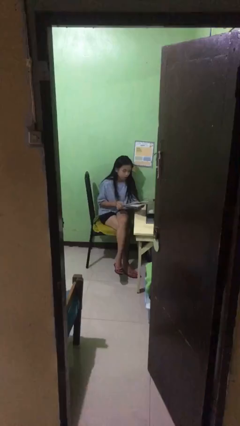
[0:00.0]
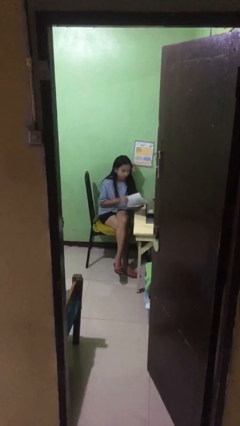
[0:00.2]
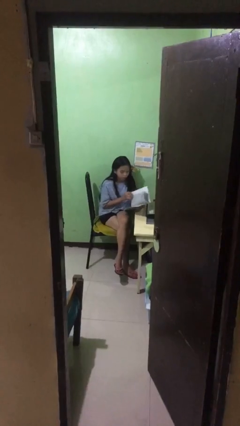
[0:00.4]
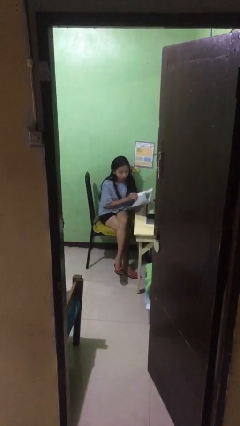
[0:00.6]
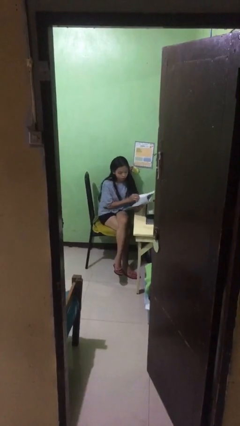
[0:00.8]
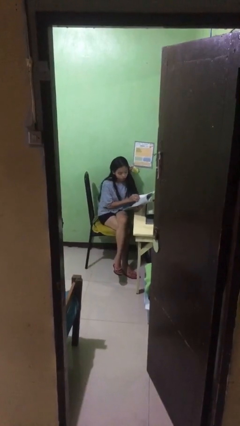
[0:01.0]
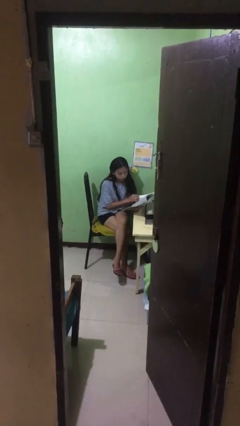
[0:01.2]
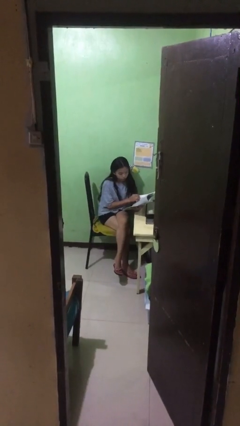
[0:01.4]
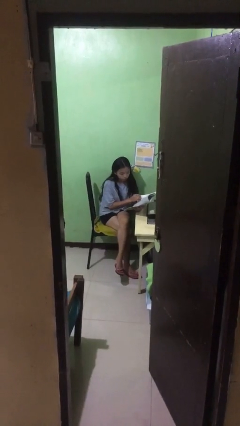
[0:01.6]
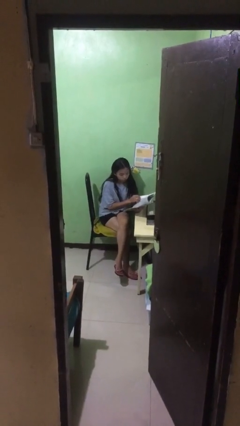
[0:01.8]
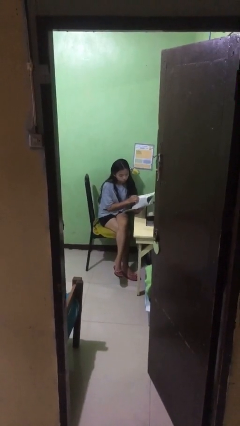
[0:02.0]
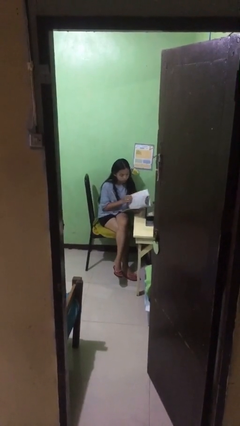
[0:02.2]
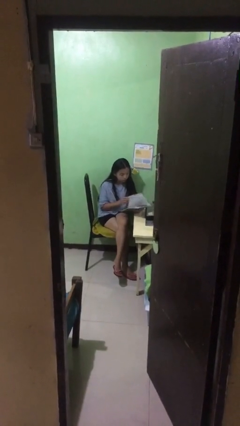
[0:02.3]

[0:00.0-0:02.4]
person reads document

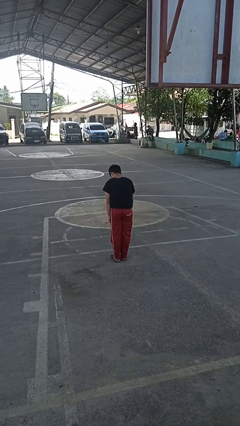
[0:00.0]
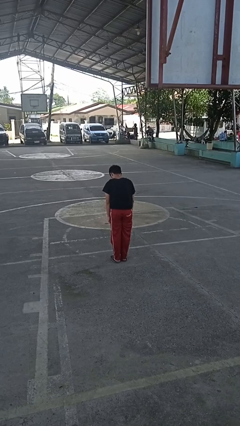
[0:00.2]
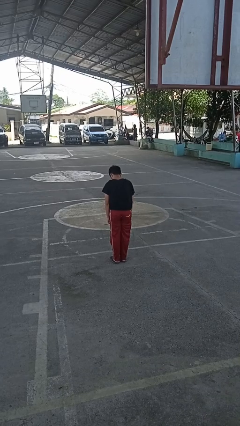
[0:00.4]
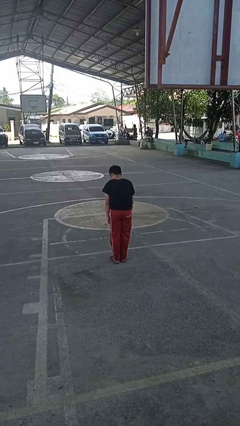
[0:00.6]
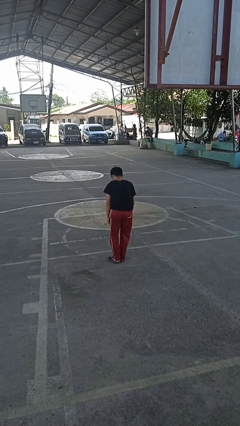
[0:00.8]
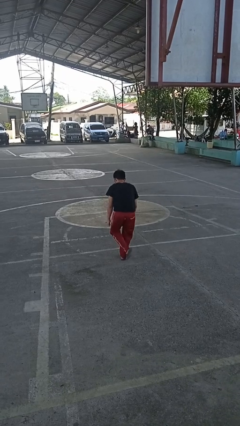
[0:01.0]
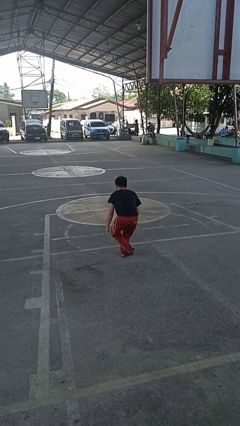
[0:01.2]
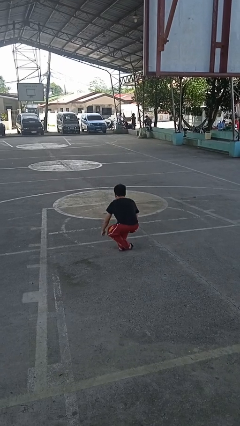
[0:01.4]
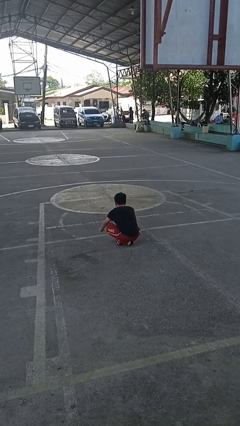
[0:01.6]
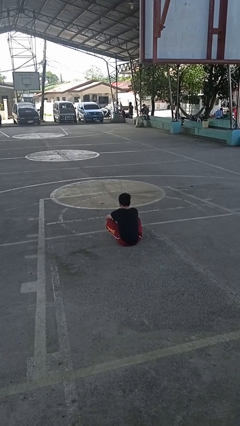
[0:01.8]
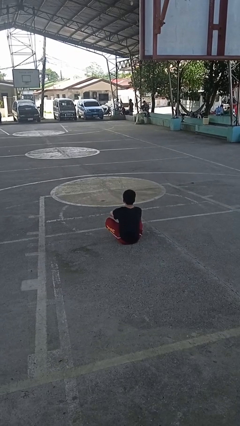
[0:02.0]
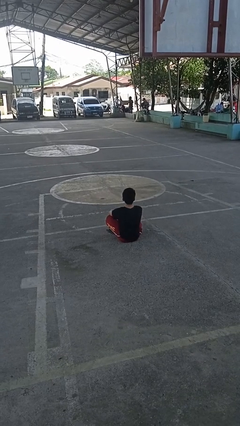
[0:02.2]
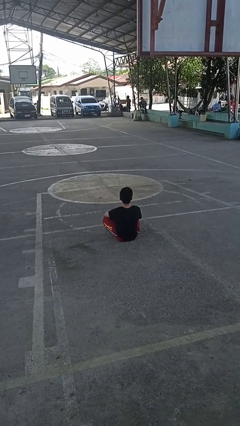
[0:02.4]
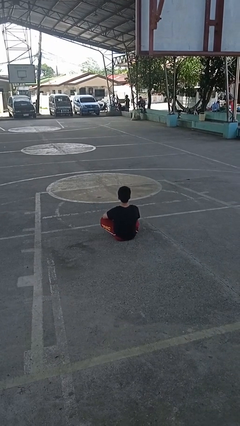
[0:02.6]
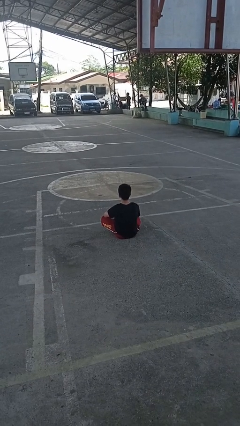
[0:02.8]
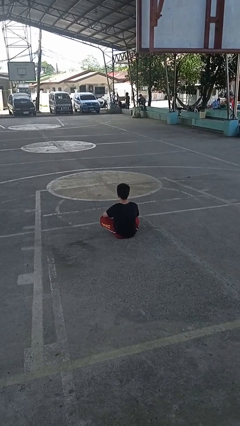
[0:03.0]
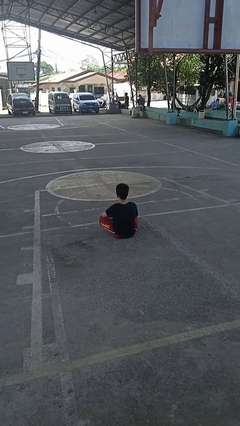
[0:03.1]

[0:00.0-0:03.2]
person sits crisscross

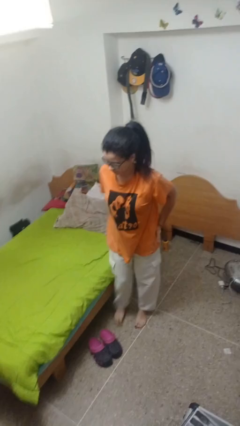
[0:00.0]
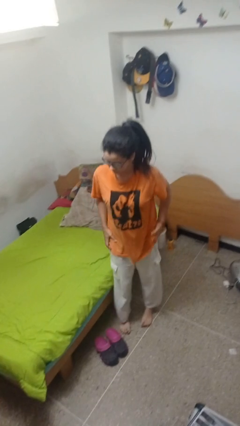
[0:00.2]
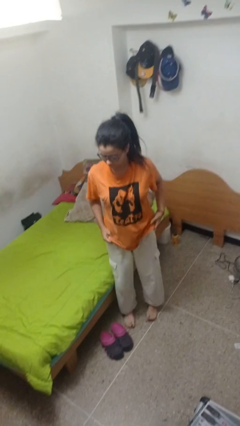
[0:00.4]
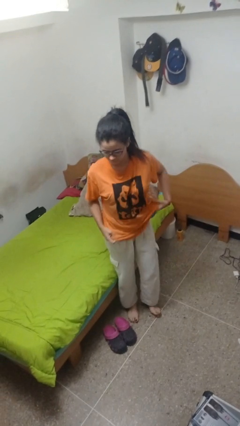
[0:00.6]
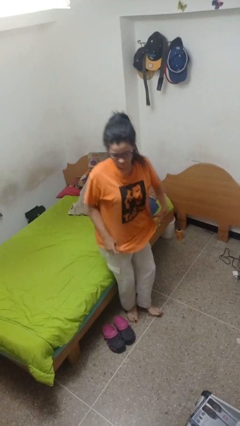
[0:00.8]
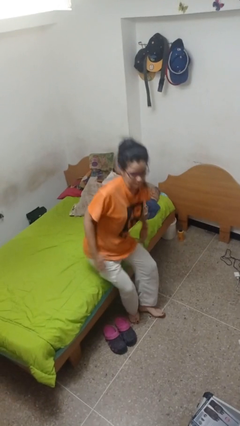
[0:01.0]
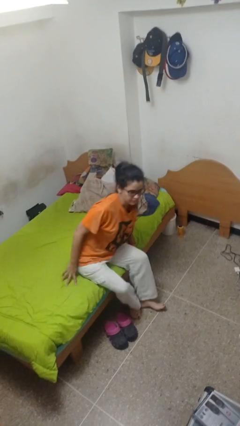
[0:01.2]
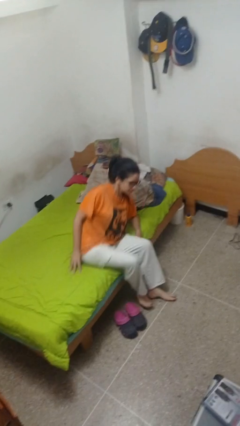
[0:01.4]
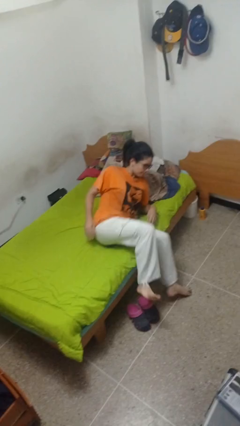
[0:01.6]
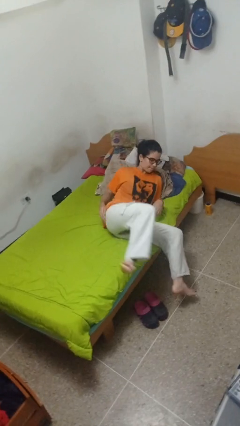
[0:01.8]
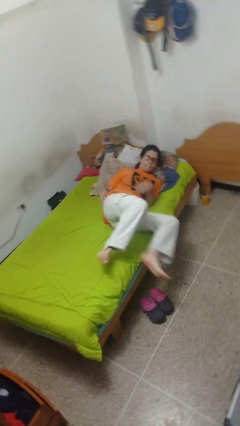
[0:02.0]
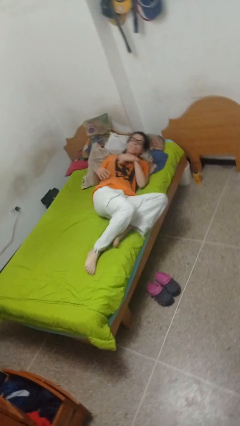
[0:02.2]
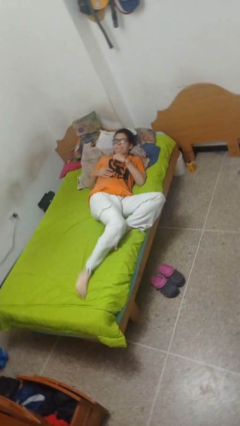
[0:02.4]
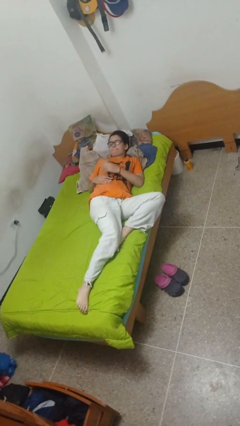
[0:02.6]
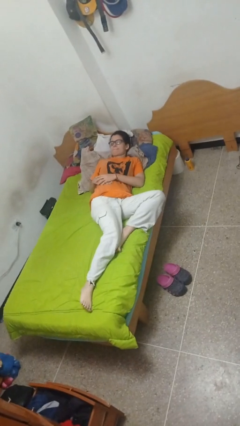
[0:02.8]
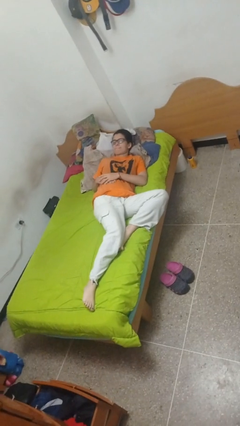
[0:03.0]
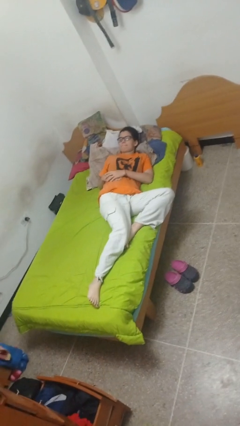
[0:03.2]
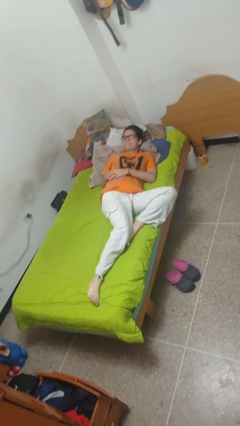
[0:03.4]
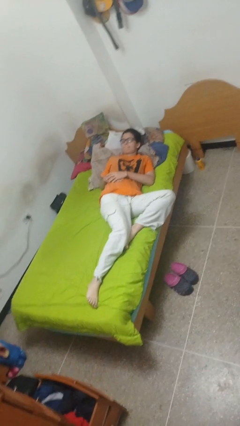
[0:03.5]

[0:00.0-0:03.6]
person lies down on bed

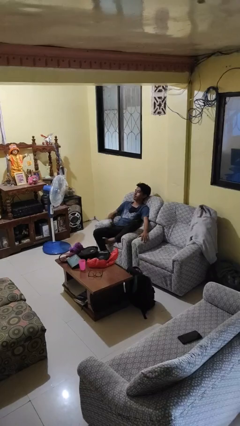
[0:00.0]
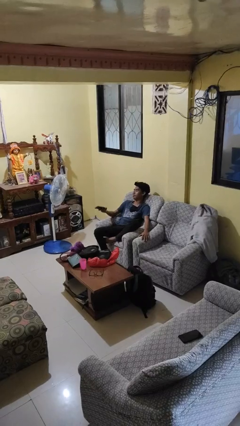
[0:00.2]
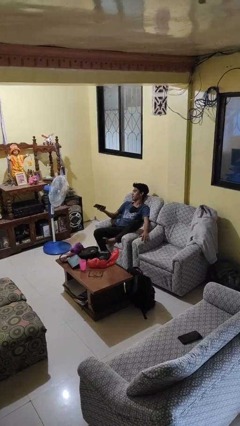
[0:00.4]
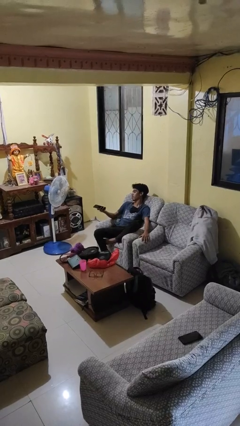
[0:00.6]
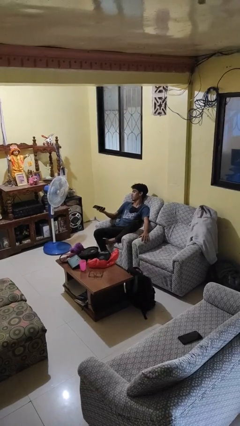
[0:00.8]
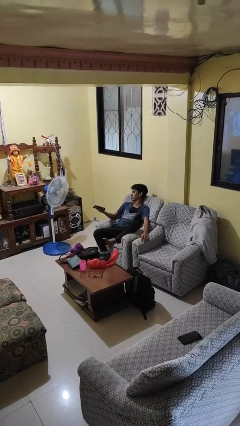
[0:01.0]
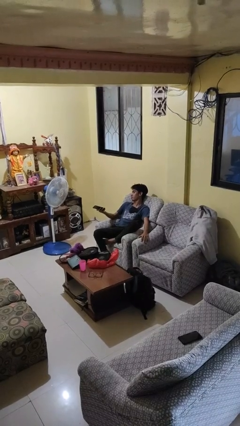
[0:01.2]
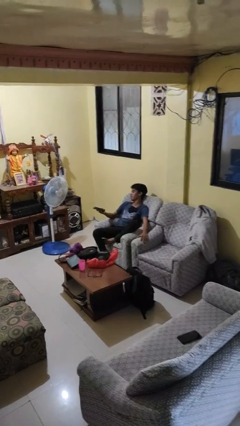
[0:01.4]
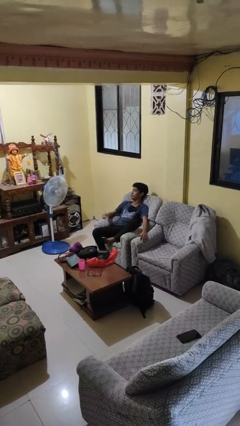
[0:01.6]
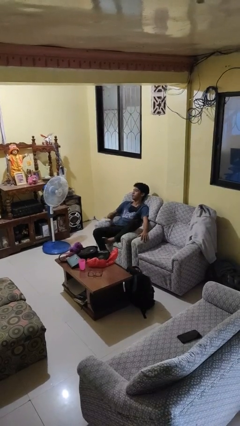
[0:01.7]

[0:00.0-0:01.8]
person uses television remote

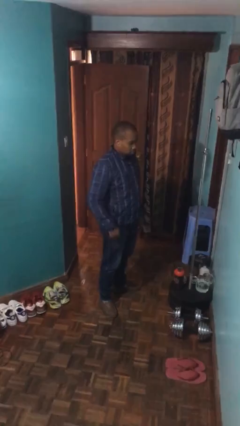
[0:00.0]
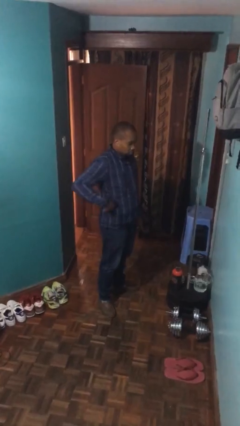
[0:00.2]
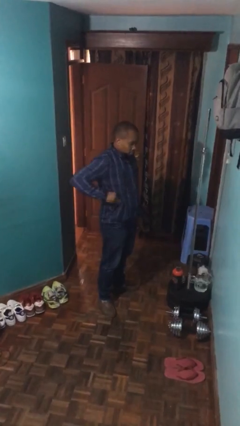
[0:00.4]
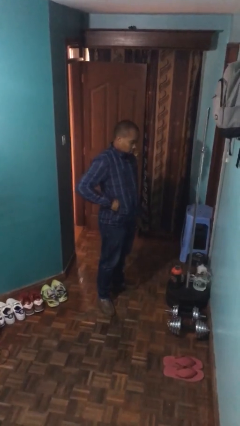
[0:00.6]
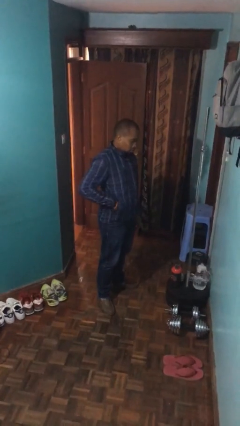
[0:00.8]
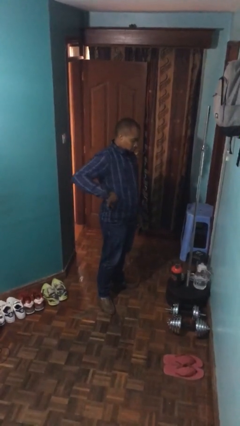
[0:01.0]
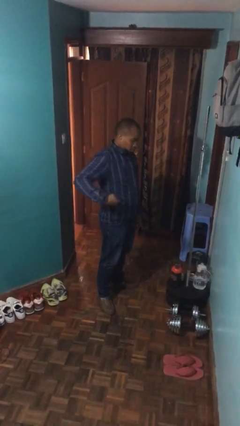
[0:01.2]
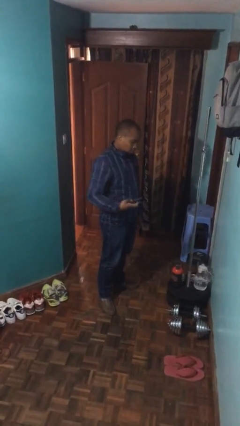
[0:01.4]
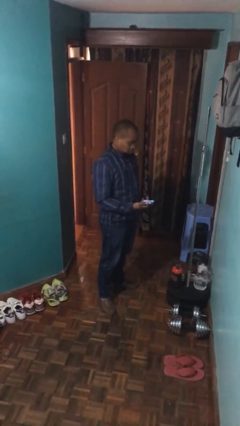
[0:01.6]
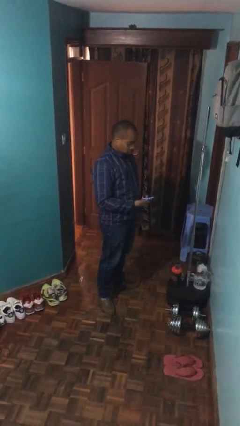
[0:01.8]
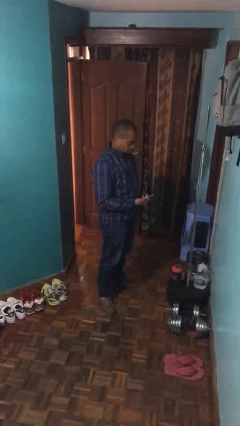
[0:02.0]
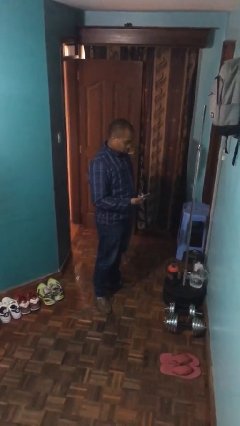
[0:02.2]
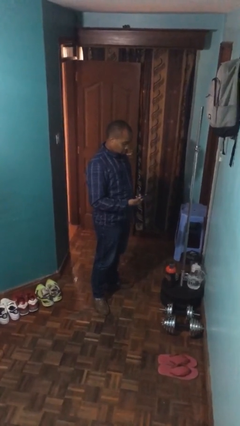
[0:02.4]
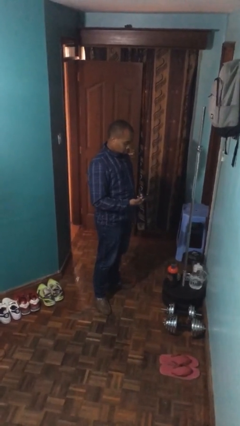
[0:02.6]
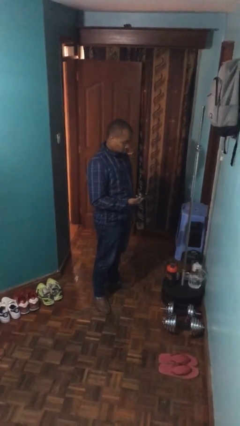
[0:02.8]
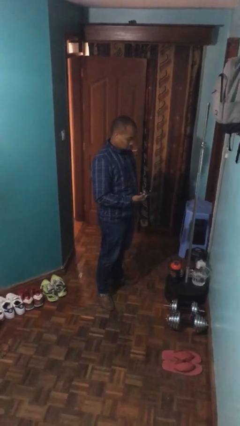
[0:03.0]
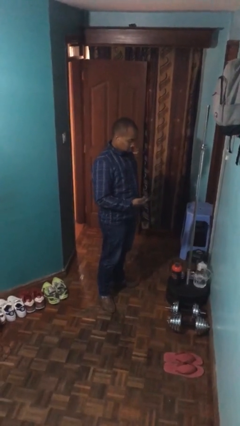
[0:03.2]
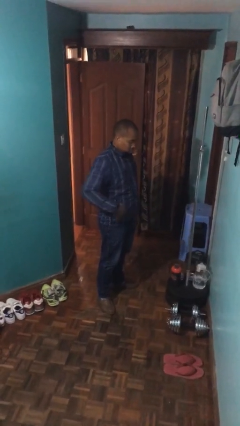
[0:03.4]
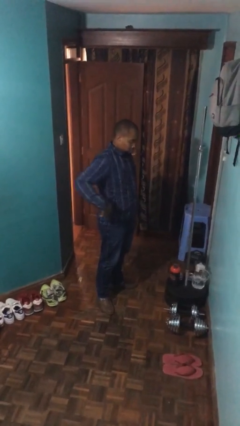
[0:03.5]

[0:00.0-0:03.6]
person takes phone from pocket

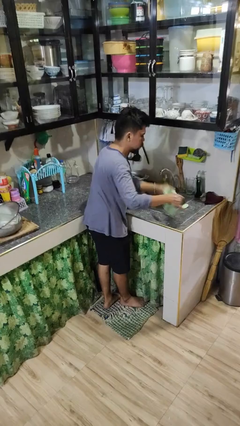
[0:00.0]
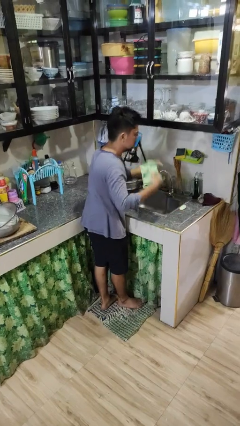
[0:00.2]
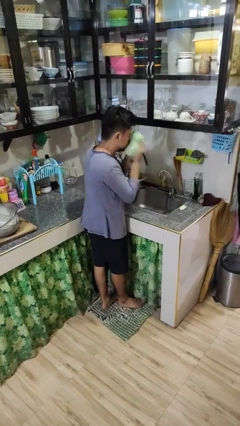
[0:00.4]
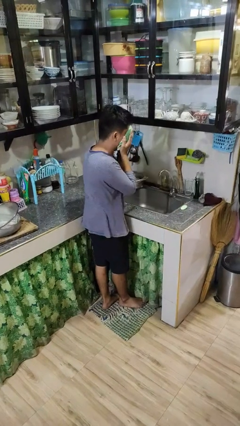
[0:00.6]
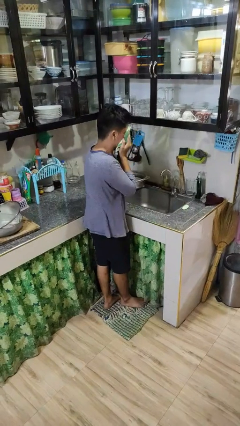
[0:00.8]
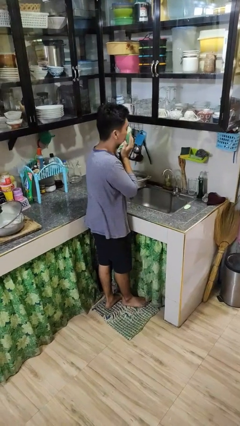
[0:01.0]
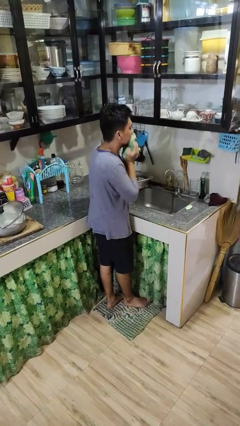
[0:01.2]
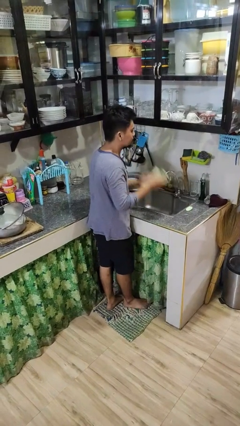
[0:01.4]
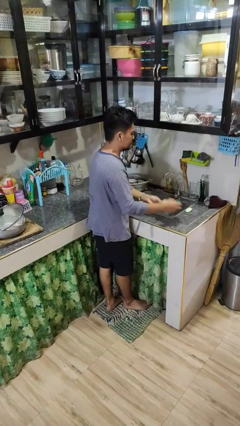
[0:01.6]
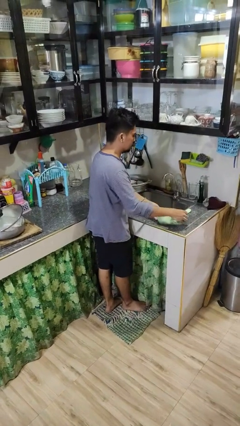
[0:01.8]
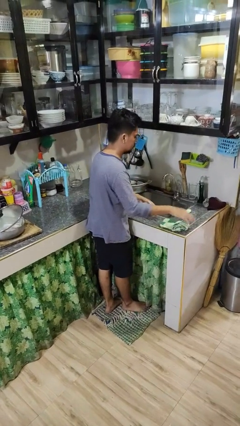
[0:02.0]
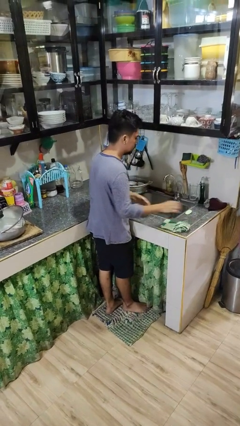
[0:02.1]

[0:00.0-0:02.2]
person dries face with towel

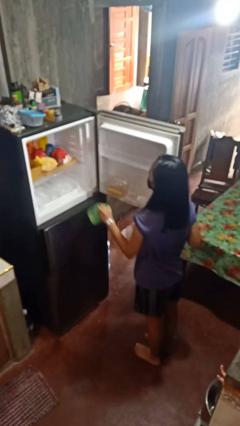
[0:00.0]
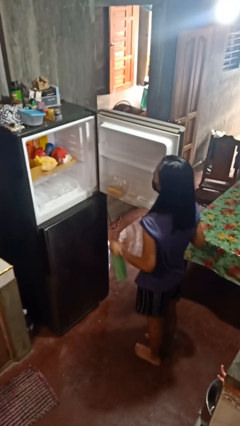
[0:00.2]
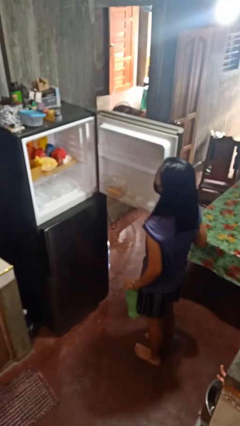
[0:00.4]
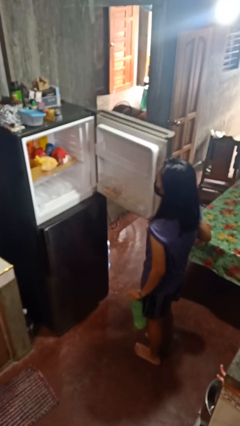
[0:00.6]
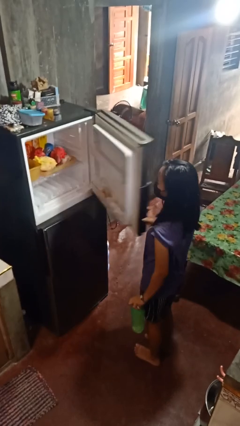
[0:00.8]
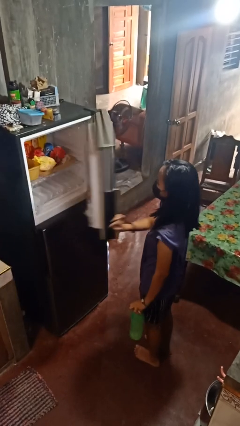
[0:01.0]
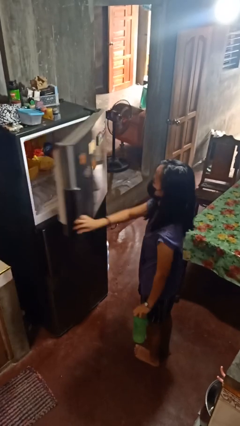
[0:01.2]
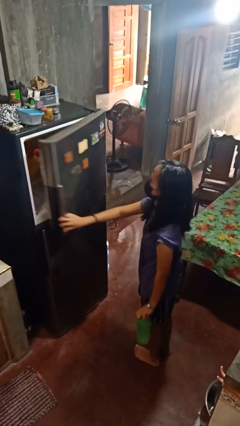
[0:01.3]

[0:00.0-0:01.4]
person closes refrigerator
